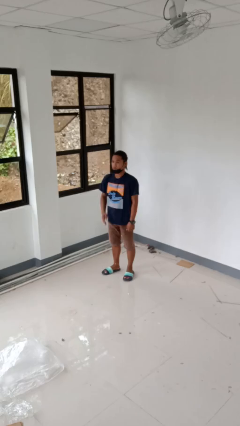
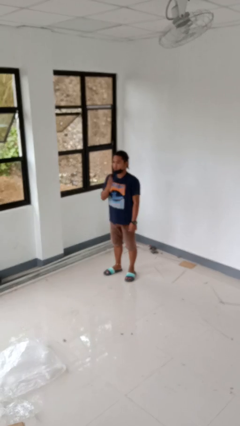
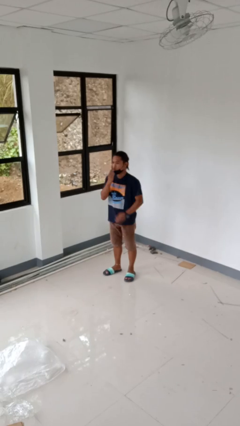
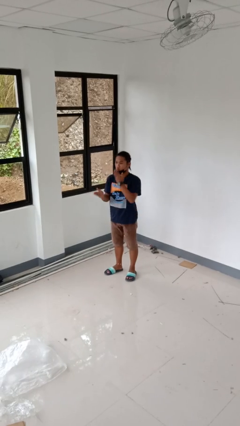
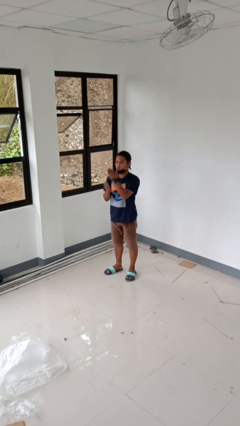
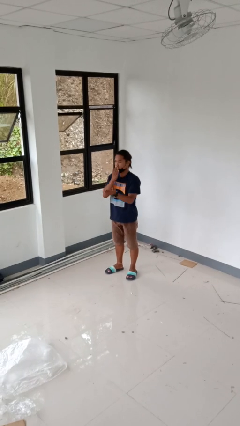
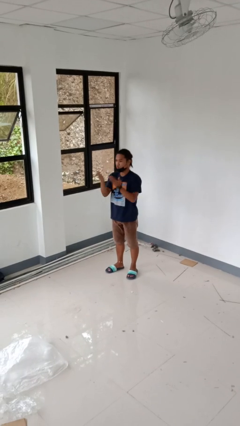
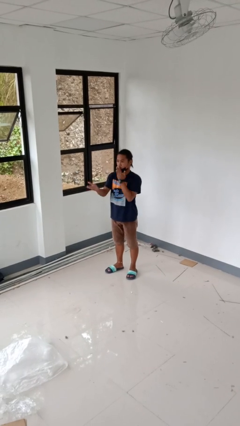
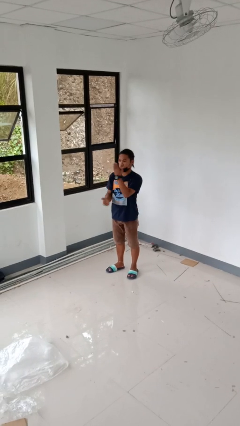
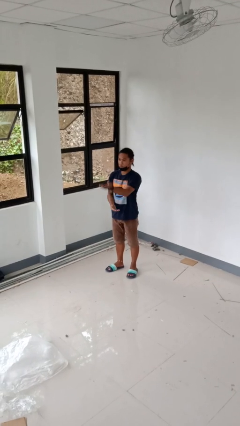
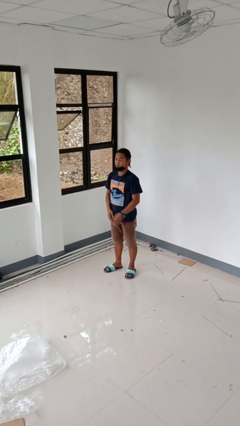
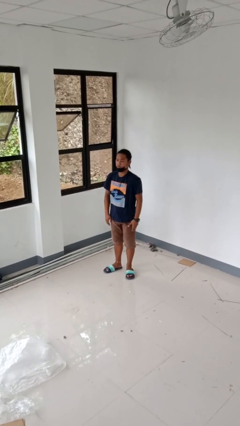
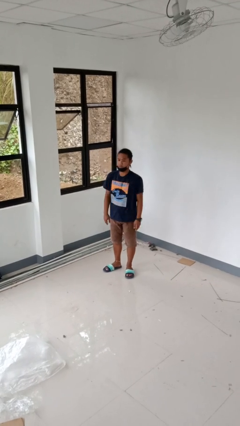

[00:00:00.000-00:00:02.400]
person gestures blow kiss

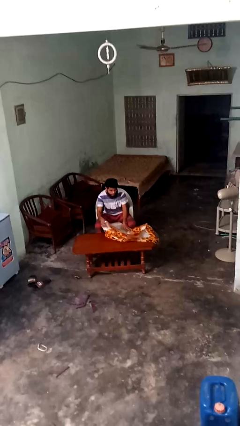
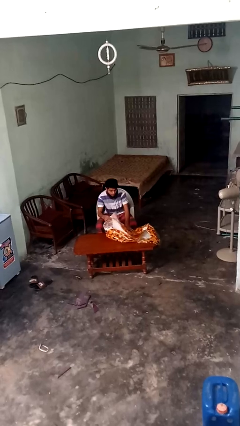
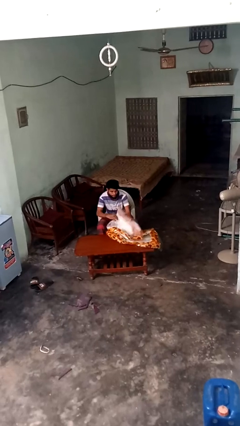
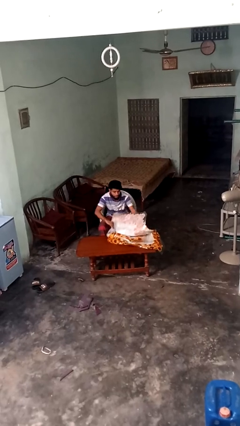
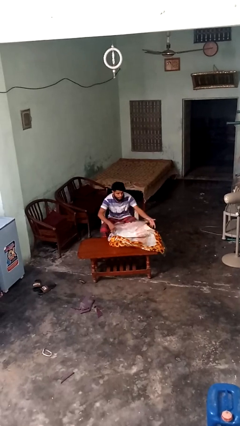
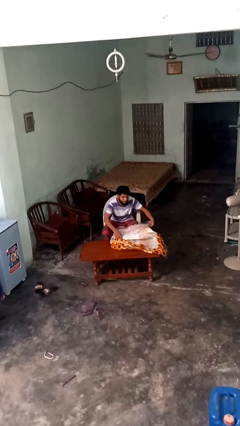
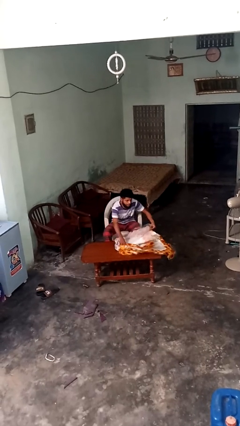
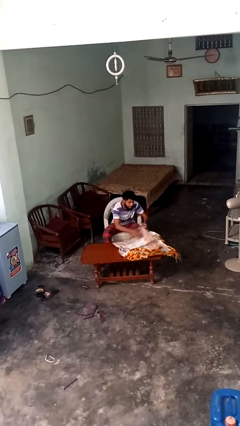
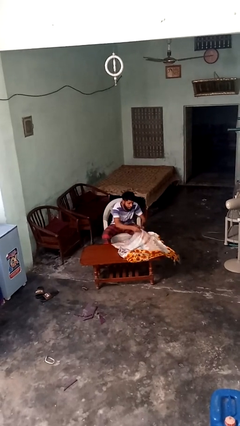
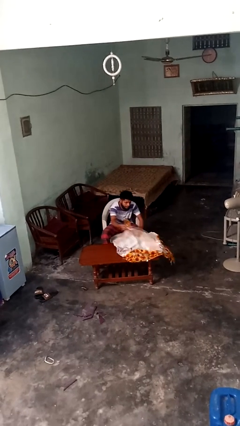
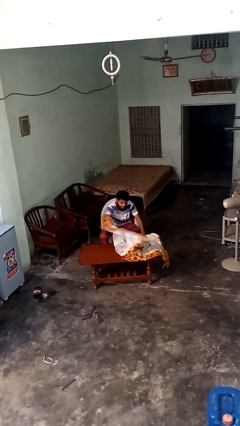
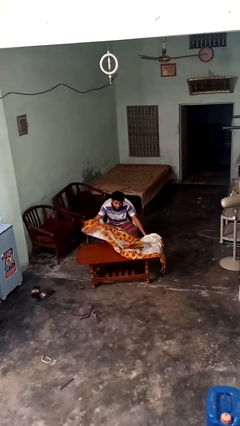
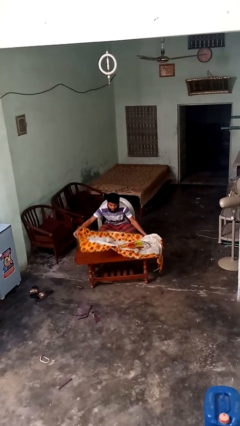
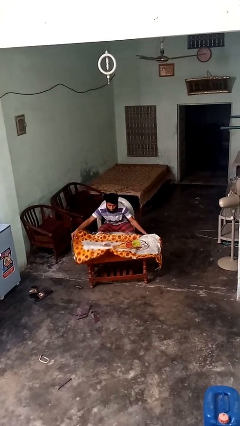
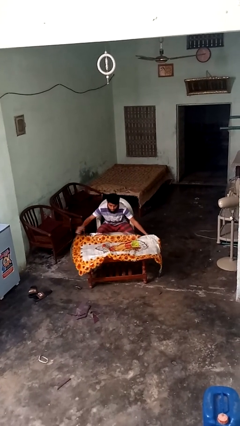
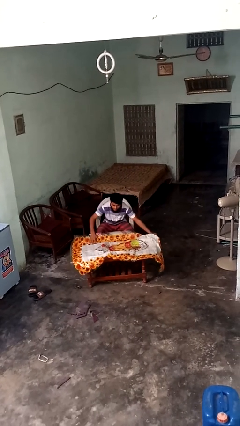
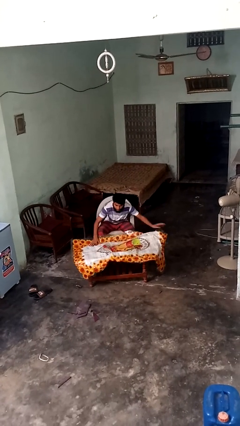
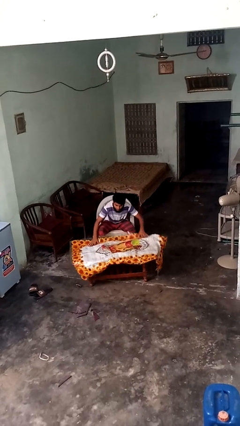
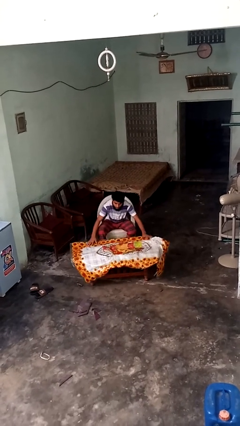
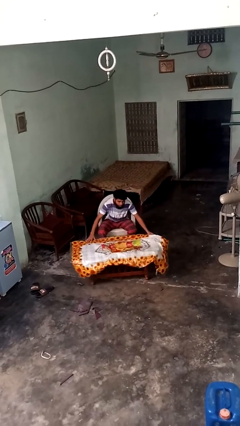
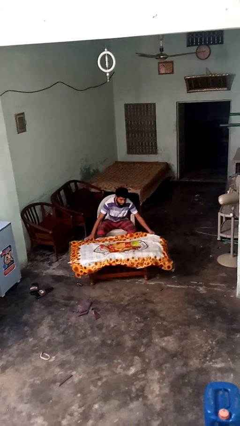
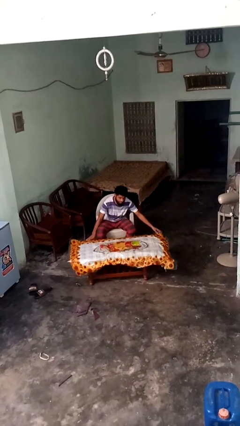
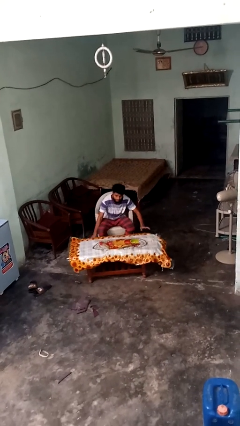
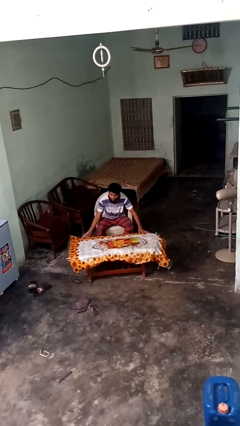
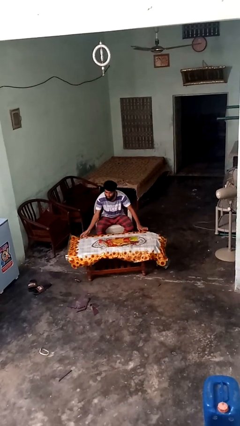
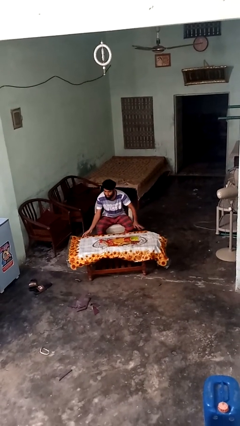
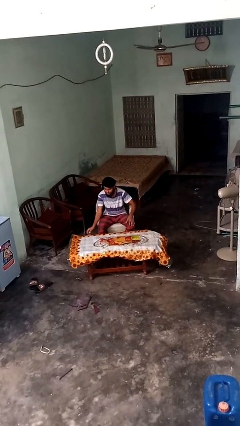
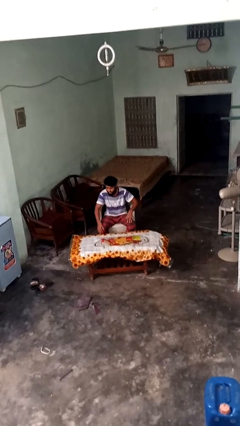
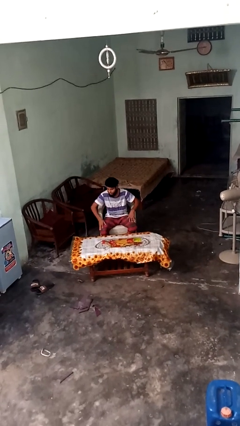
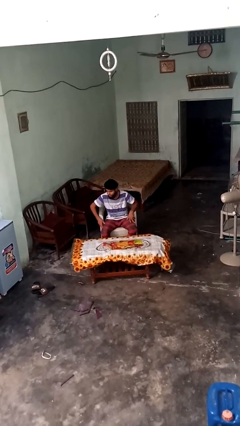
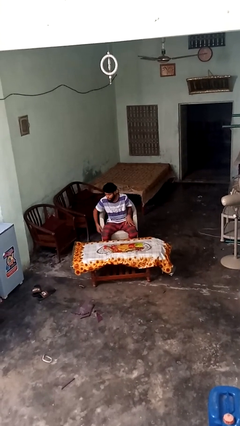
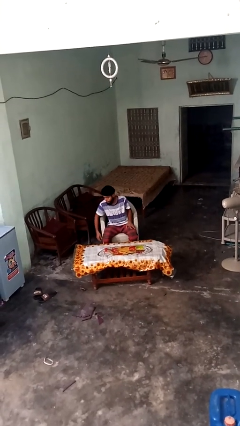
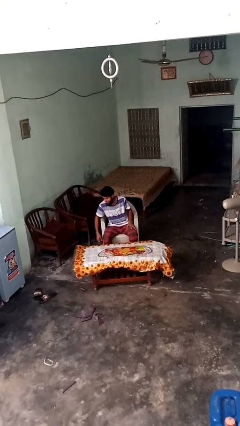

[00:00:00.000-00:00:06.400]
person spreads tablecloth

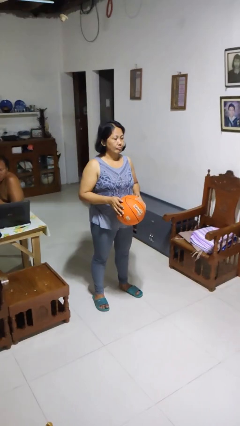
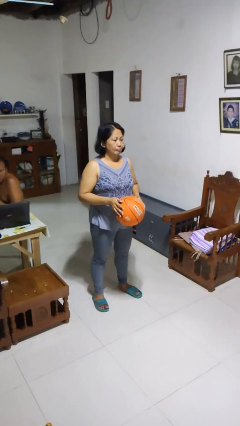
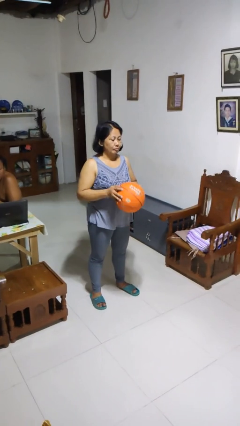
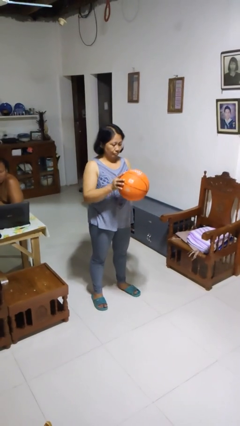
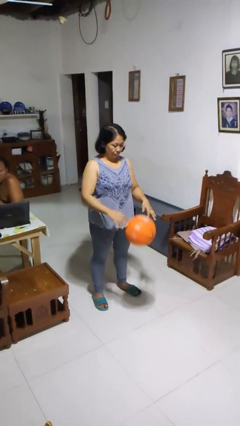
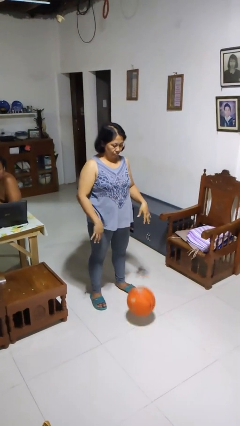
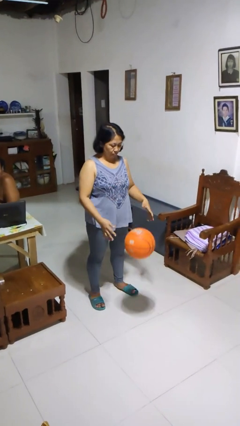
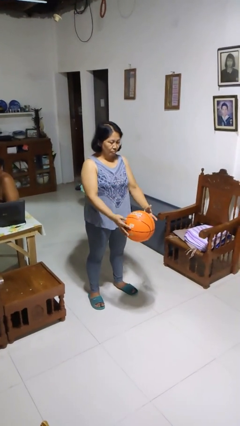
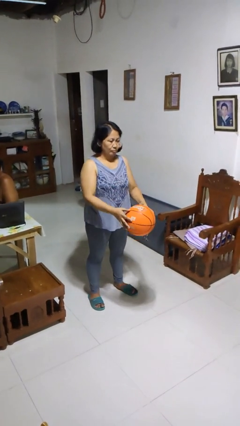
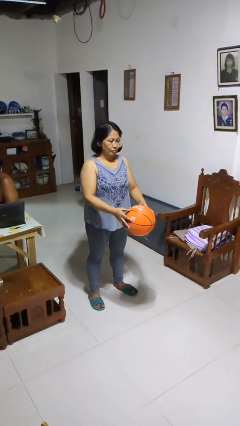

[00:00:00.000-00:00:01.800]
person bounces ball on floor

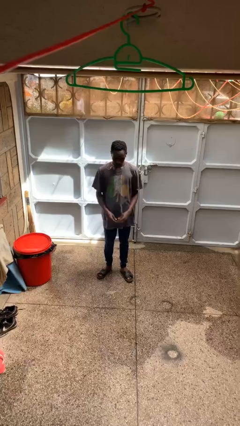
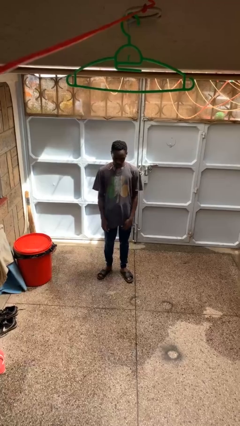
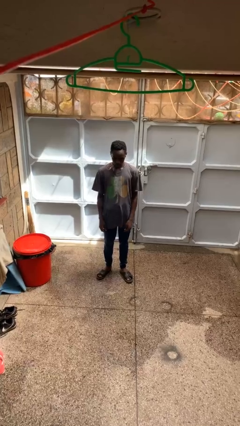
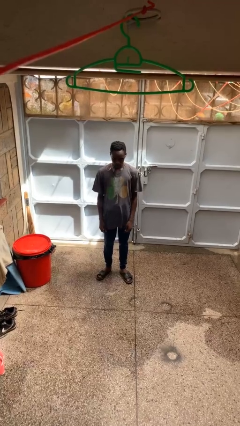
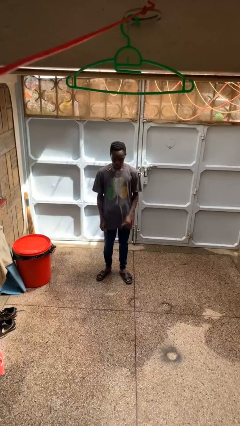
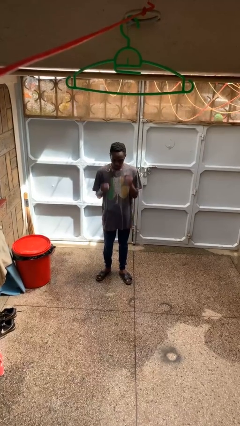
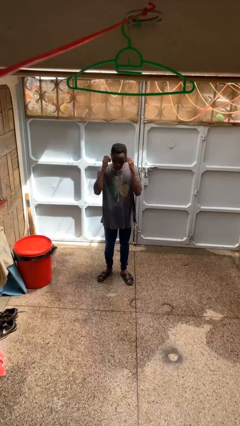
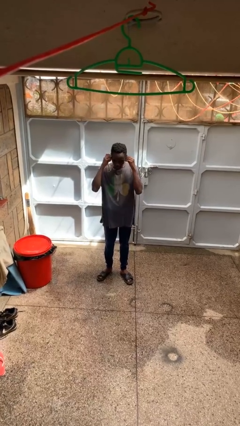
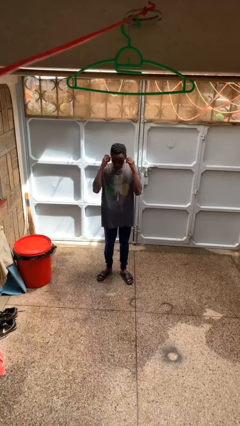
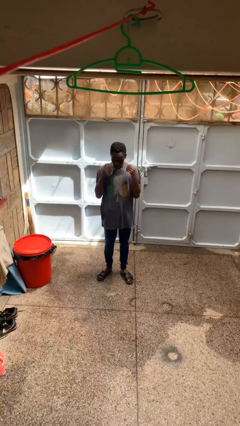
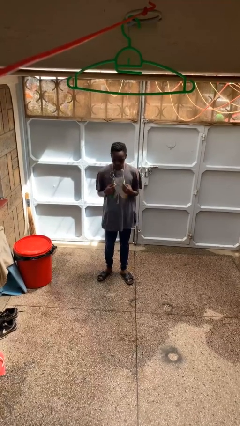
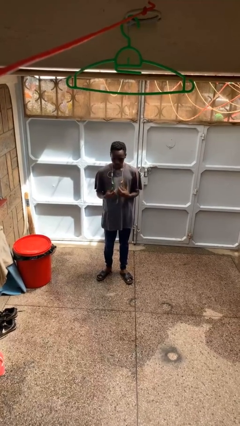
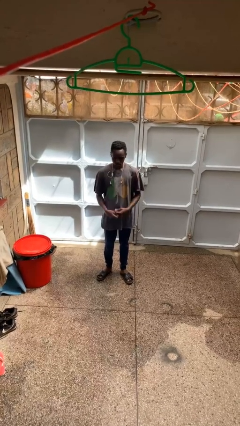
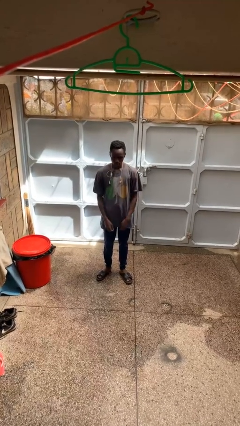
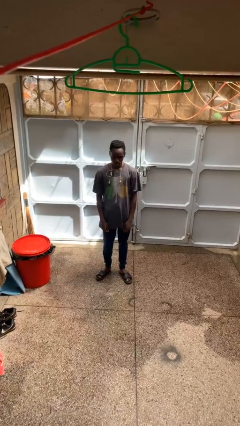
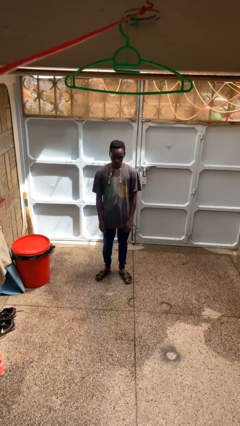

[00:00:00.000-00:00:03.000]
person takes off headphones

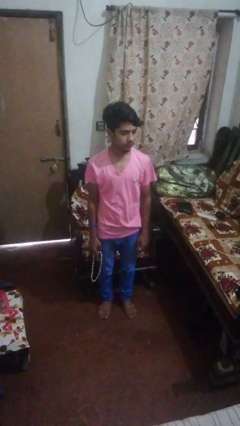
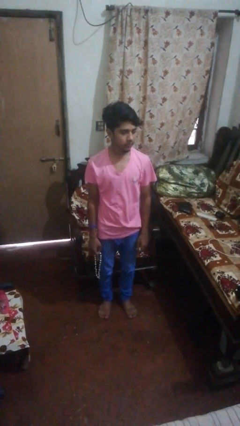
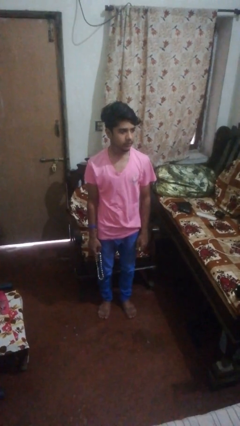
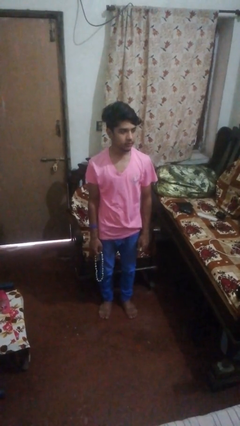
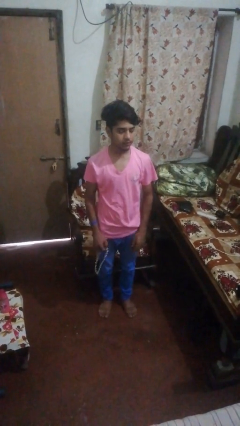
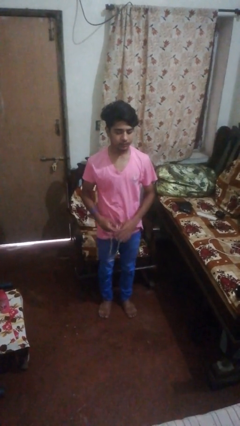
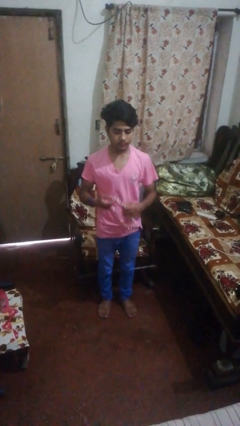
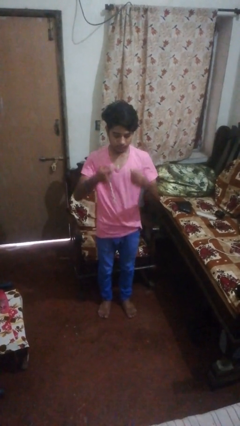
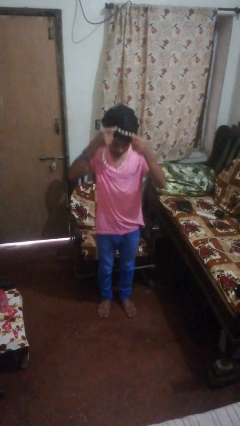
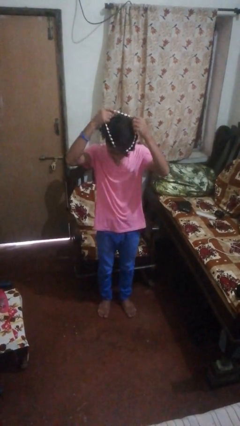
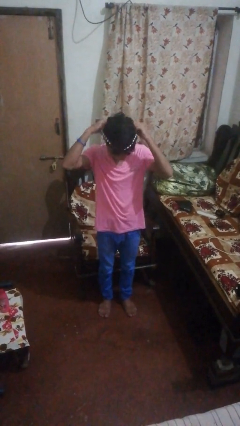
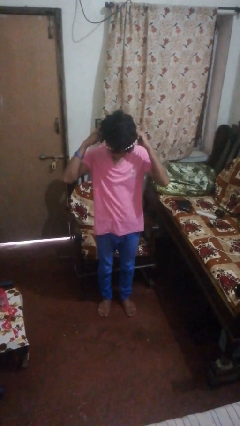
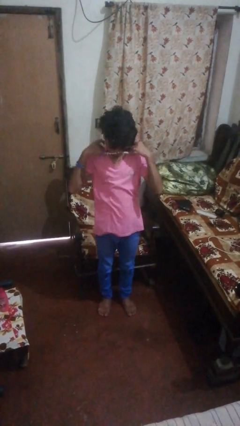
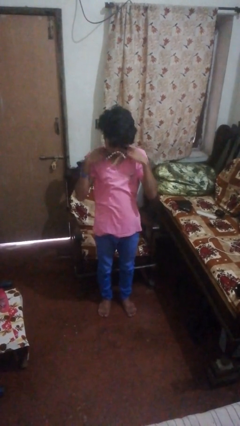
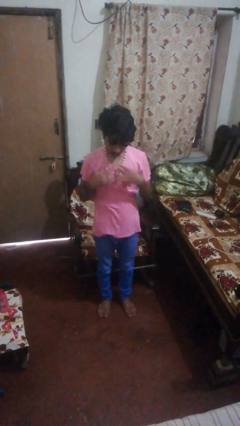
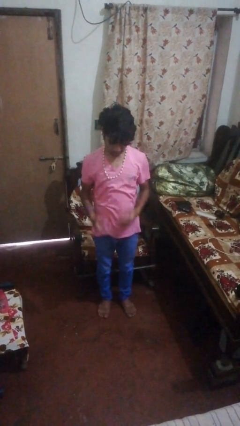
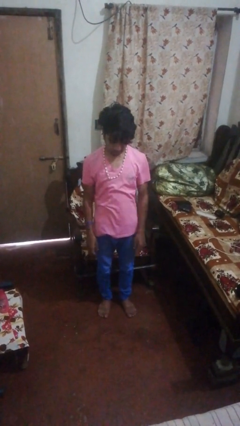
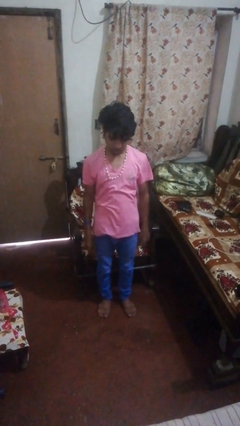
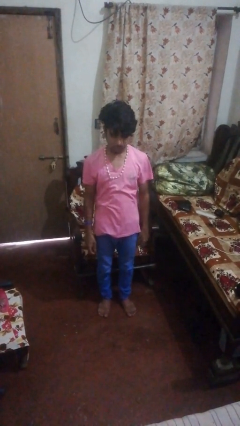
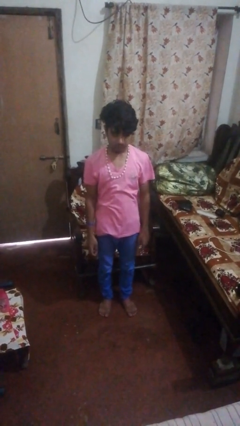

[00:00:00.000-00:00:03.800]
person puts on necklace
